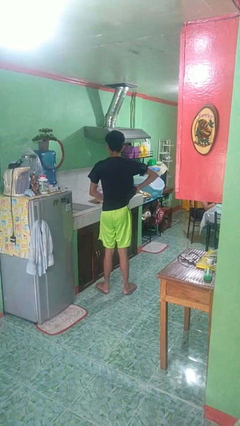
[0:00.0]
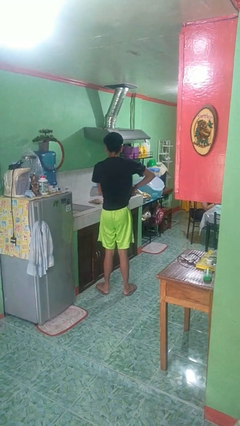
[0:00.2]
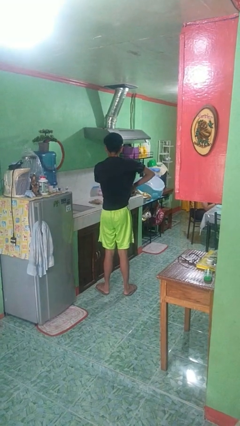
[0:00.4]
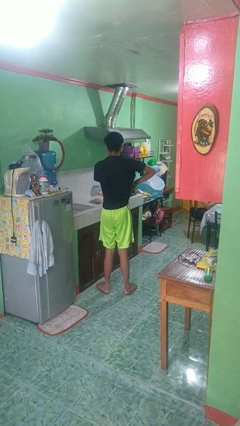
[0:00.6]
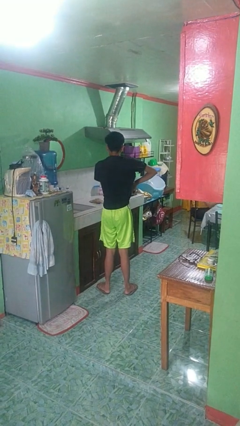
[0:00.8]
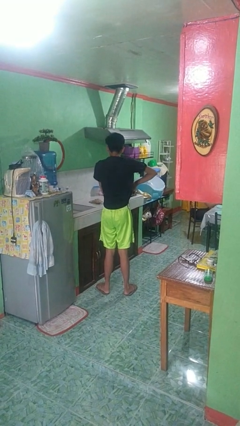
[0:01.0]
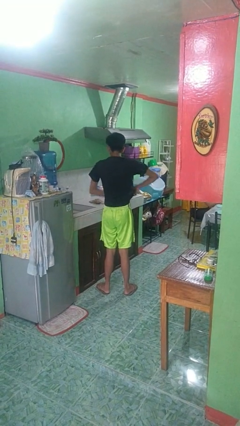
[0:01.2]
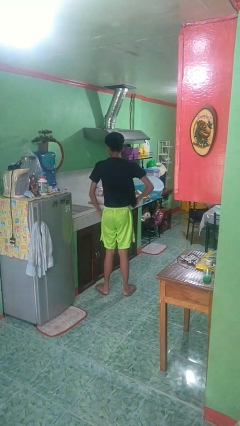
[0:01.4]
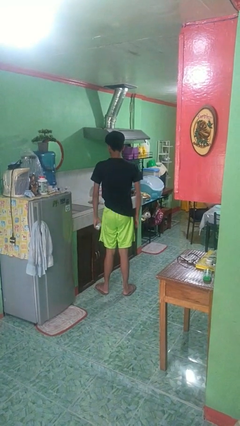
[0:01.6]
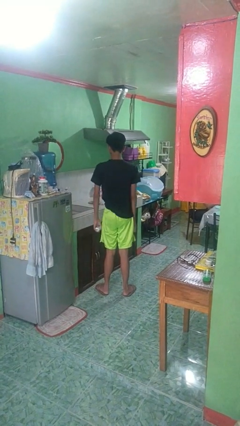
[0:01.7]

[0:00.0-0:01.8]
person applies deodorant

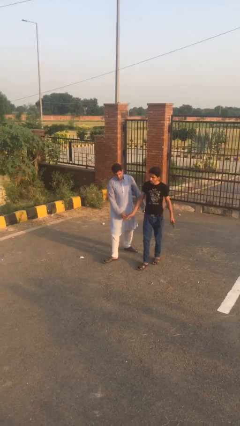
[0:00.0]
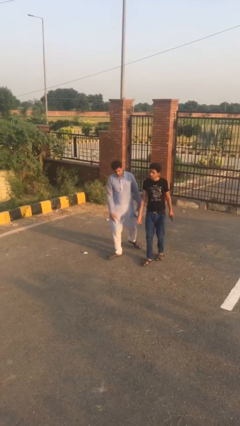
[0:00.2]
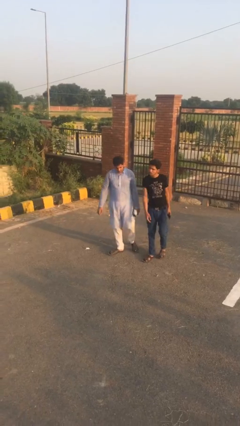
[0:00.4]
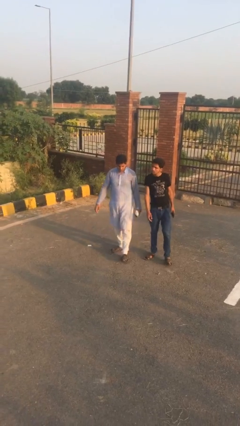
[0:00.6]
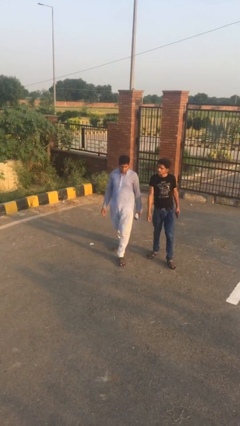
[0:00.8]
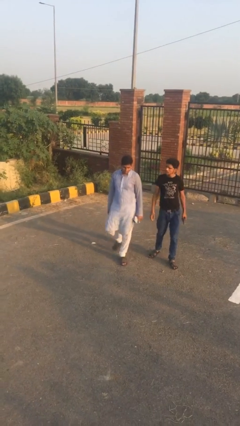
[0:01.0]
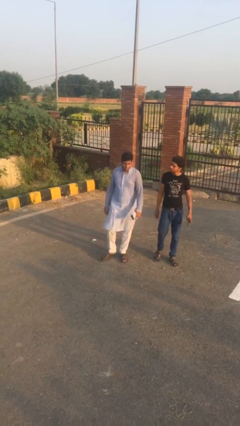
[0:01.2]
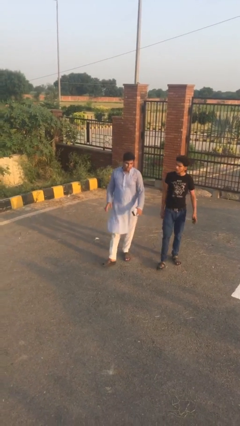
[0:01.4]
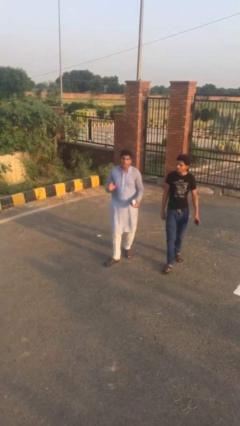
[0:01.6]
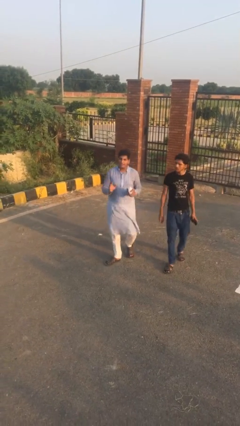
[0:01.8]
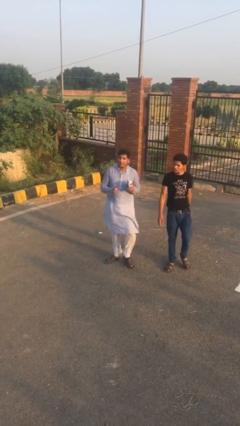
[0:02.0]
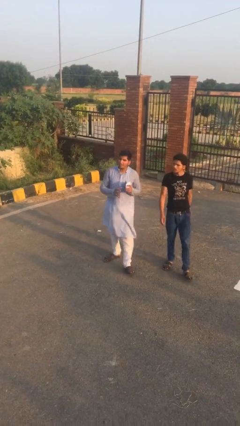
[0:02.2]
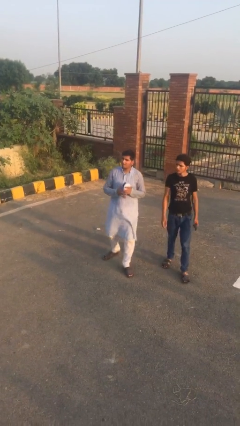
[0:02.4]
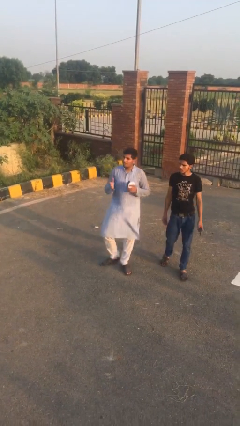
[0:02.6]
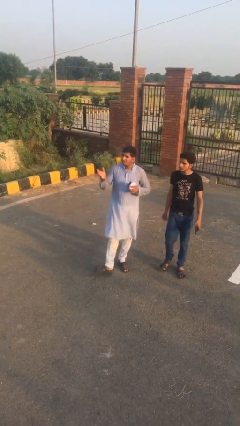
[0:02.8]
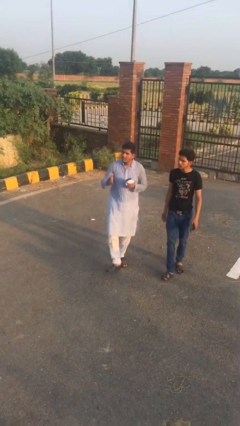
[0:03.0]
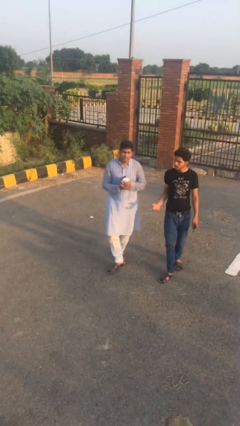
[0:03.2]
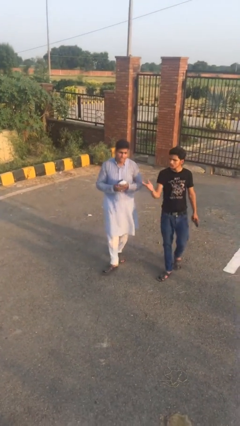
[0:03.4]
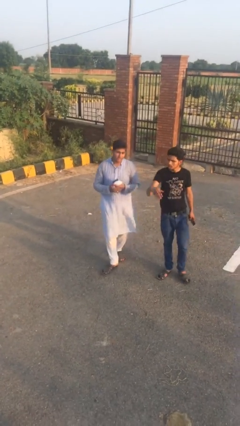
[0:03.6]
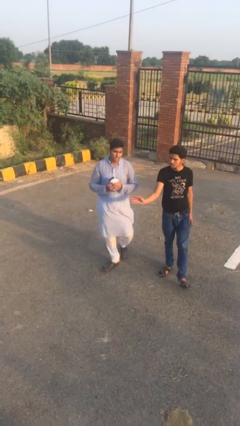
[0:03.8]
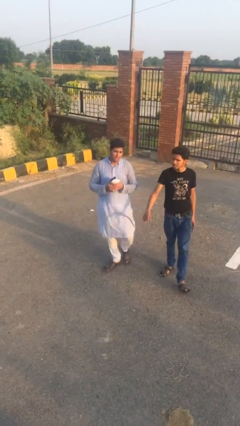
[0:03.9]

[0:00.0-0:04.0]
person talks to person

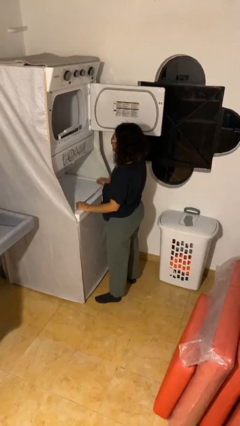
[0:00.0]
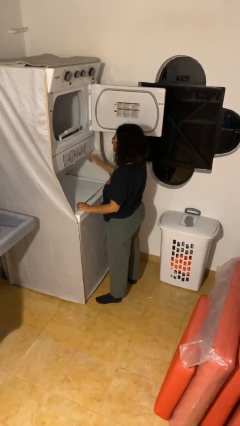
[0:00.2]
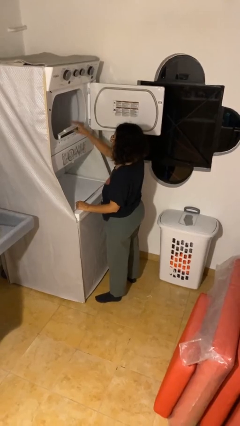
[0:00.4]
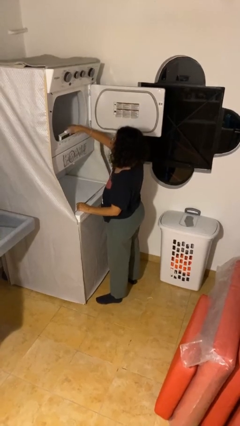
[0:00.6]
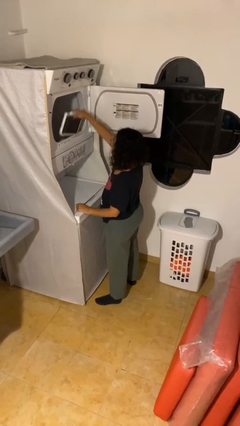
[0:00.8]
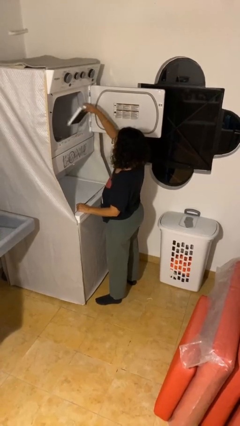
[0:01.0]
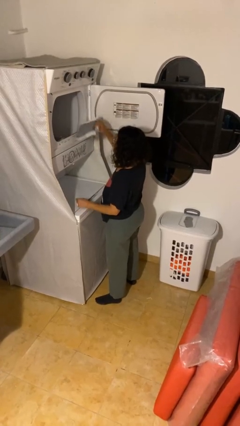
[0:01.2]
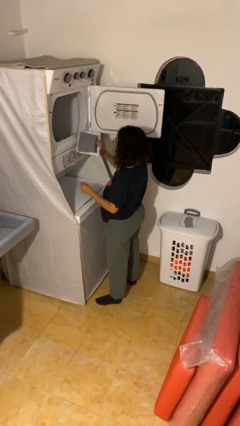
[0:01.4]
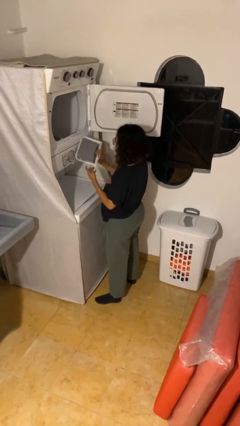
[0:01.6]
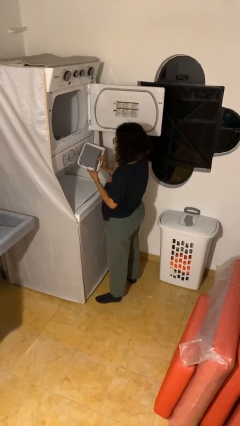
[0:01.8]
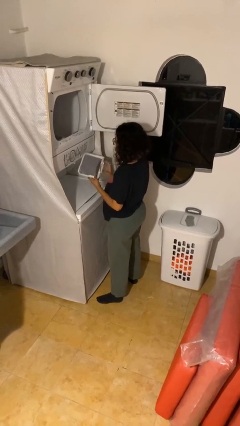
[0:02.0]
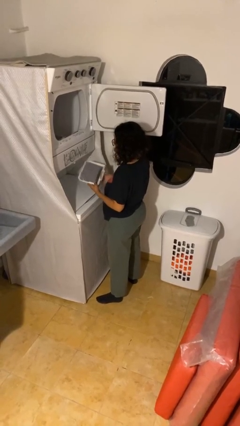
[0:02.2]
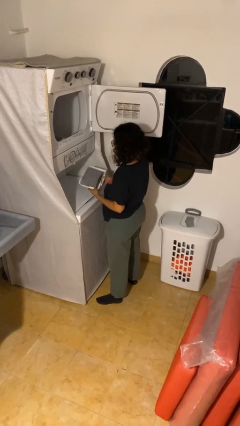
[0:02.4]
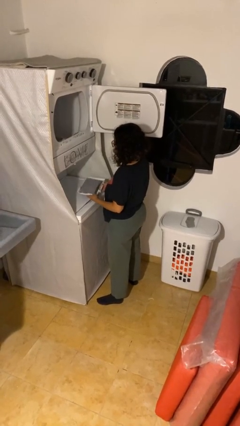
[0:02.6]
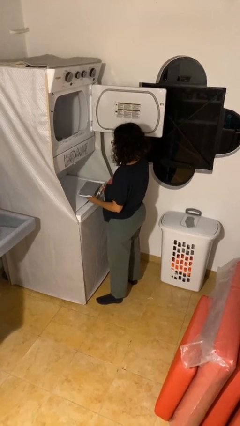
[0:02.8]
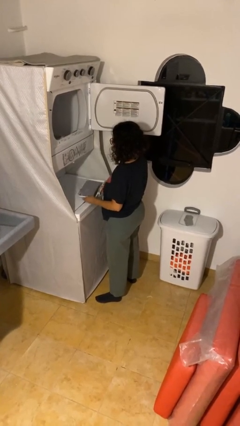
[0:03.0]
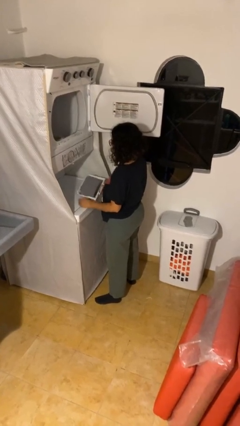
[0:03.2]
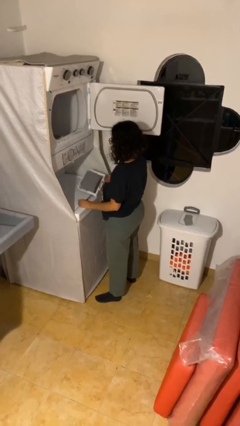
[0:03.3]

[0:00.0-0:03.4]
person cleans dryer lint trap

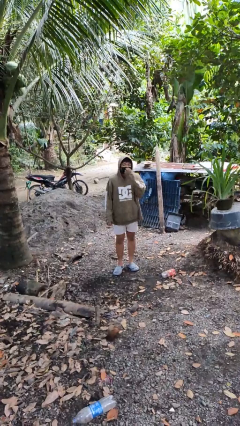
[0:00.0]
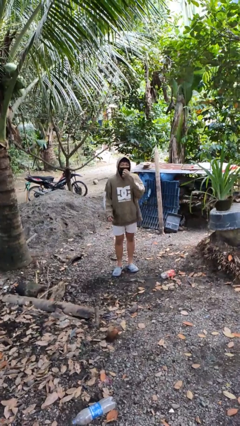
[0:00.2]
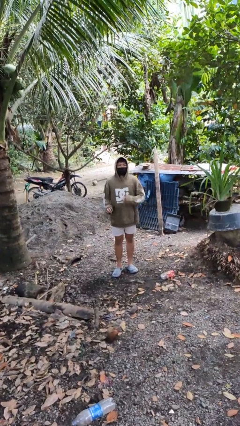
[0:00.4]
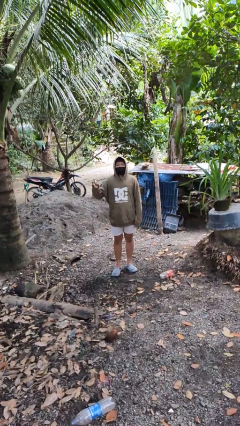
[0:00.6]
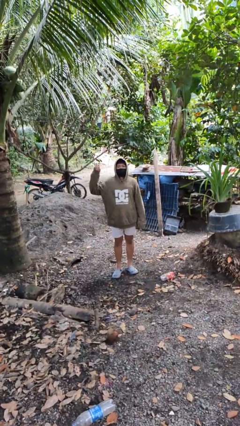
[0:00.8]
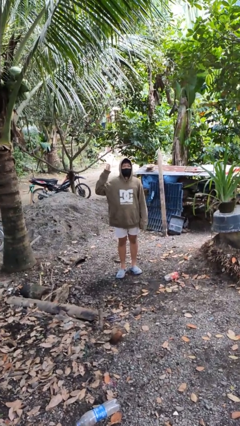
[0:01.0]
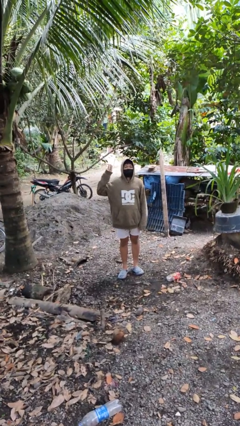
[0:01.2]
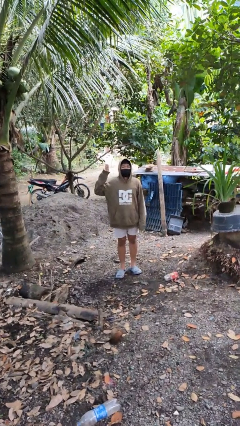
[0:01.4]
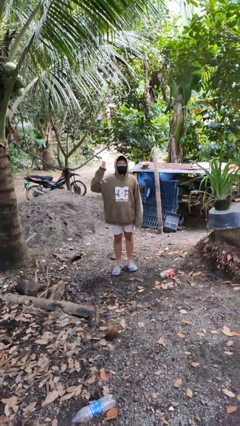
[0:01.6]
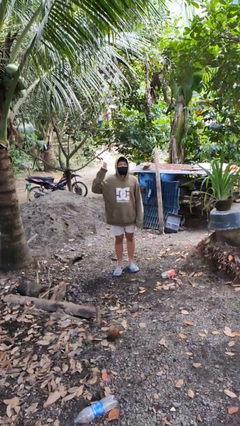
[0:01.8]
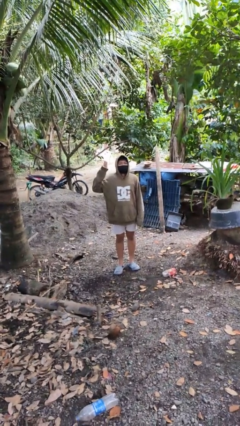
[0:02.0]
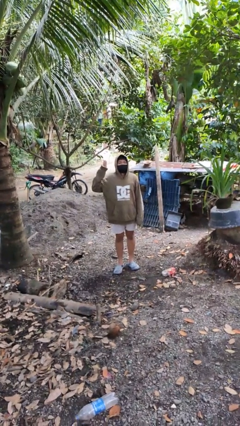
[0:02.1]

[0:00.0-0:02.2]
person gestures number three

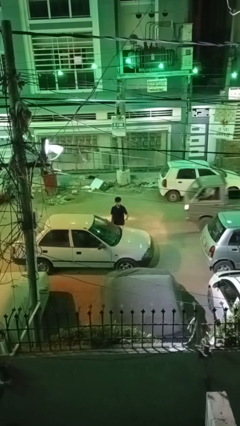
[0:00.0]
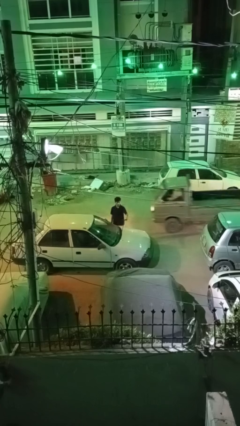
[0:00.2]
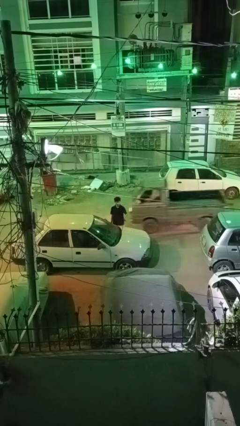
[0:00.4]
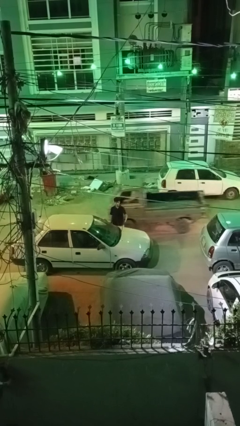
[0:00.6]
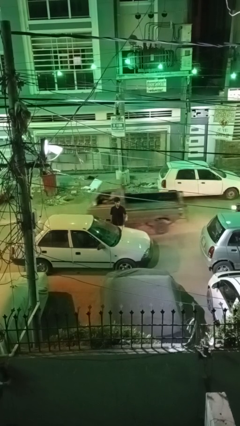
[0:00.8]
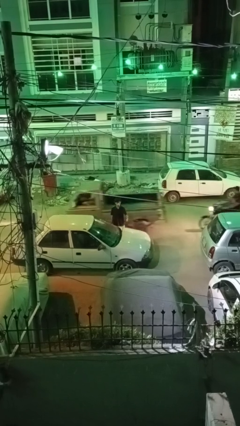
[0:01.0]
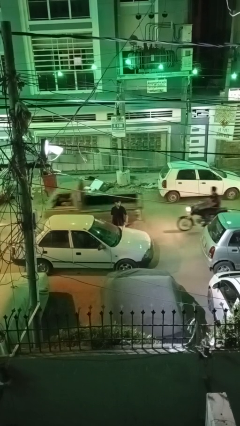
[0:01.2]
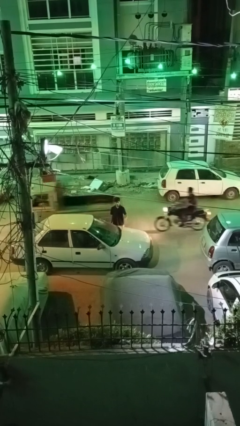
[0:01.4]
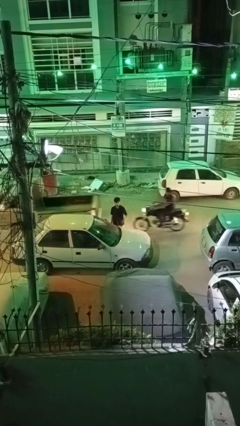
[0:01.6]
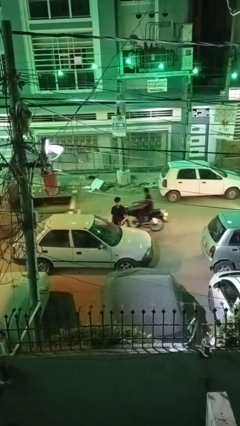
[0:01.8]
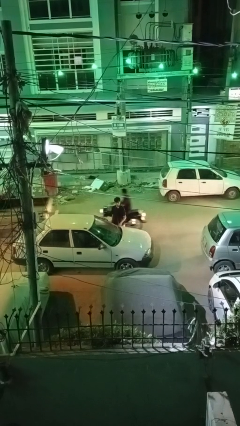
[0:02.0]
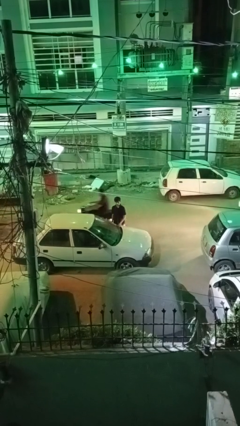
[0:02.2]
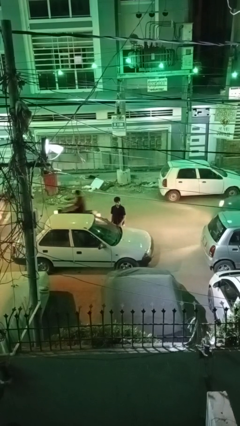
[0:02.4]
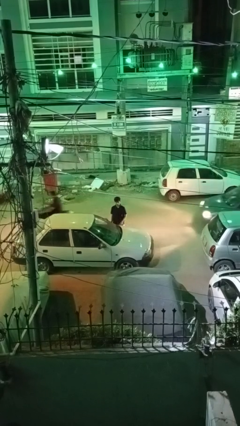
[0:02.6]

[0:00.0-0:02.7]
person flips down car wipers

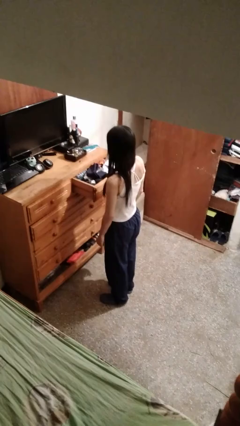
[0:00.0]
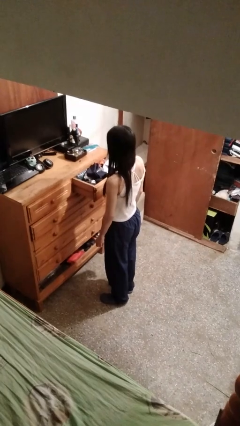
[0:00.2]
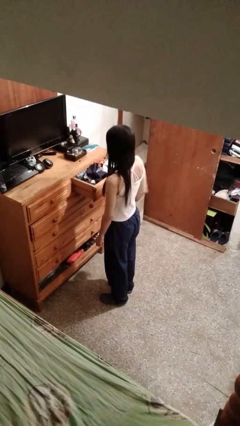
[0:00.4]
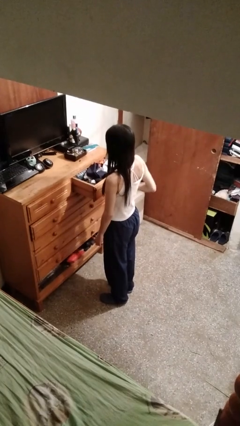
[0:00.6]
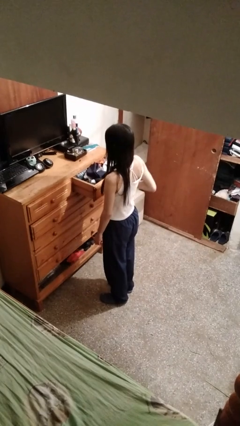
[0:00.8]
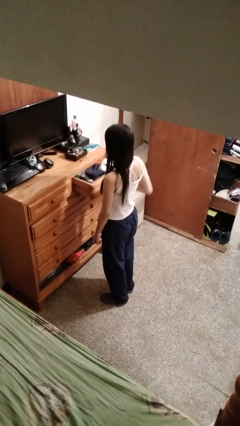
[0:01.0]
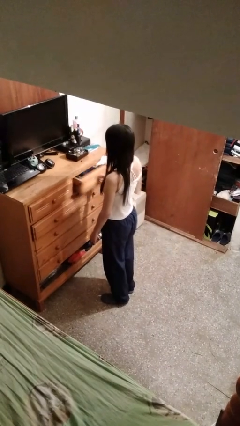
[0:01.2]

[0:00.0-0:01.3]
person closes dresser drawer

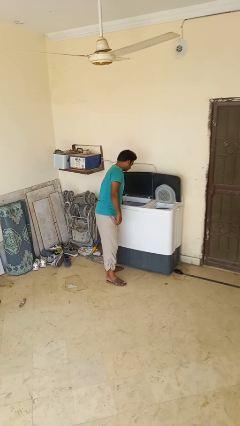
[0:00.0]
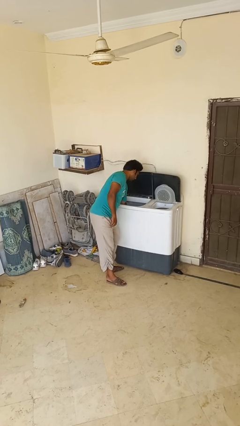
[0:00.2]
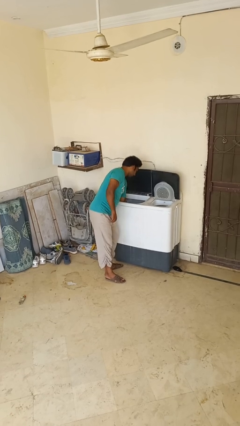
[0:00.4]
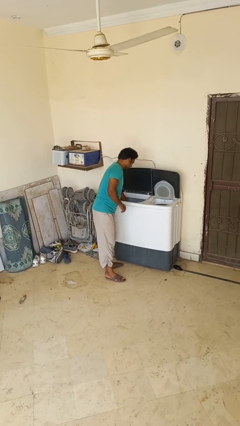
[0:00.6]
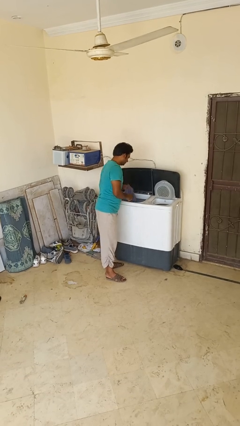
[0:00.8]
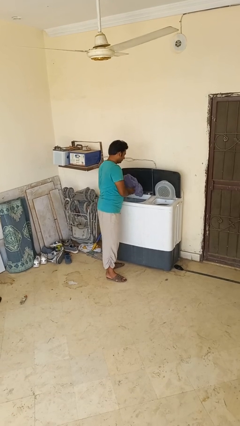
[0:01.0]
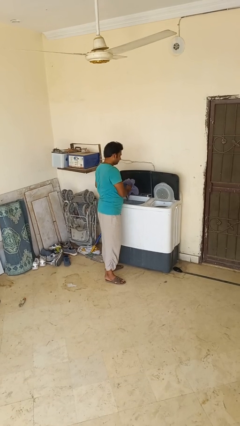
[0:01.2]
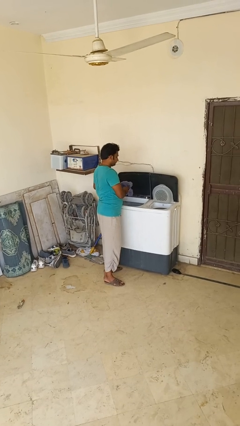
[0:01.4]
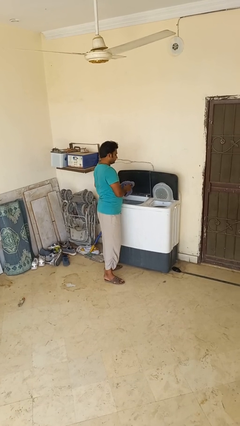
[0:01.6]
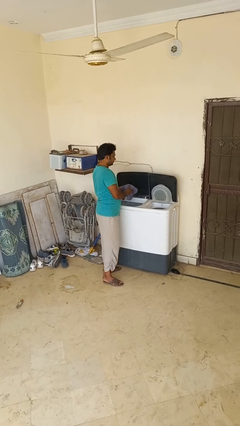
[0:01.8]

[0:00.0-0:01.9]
person unloads clotheswasher
